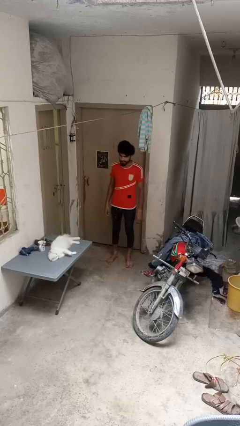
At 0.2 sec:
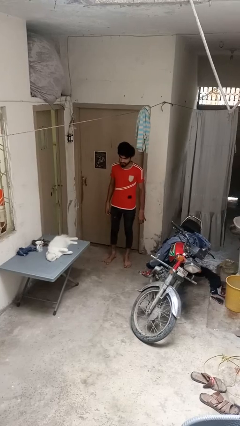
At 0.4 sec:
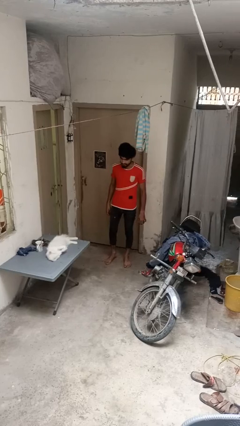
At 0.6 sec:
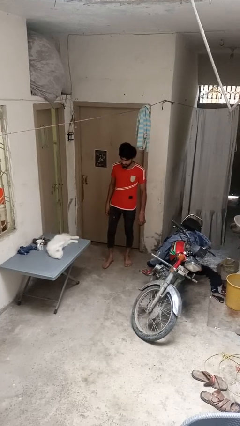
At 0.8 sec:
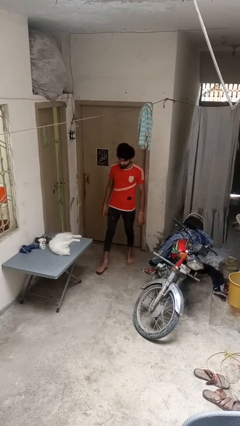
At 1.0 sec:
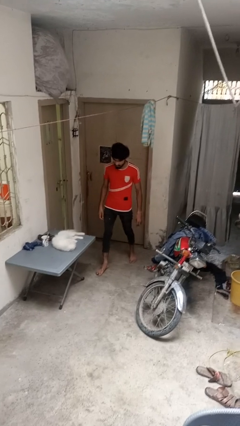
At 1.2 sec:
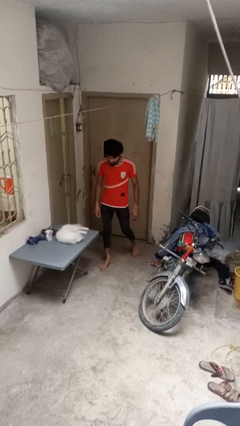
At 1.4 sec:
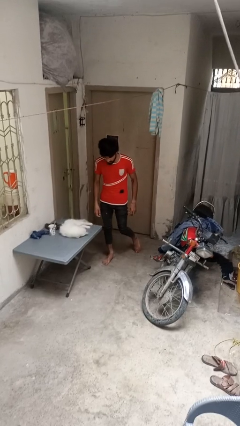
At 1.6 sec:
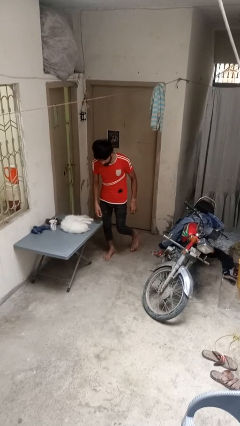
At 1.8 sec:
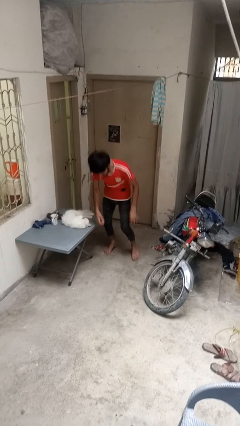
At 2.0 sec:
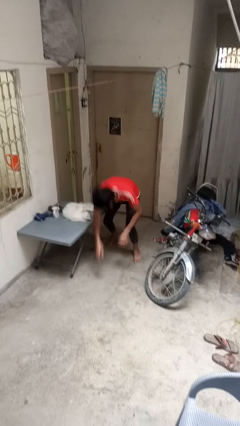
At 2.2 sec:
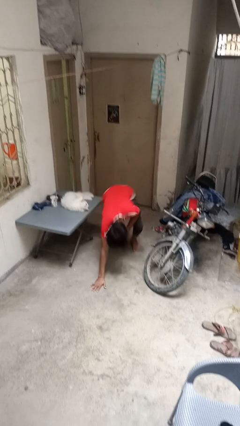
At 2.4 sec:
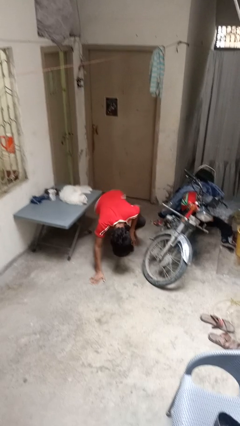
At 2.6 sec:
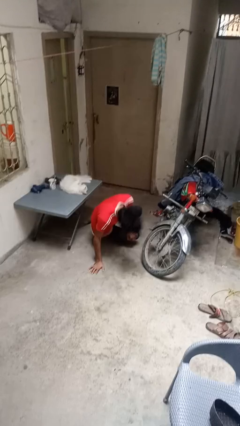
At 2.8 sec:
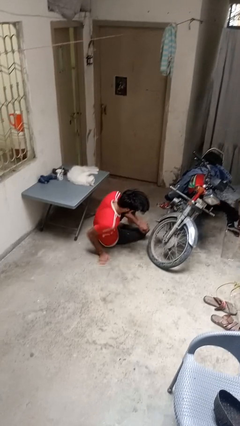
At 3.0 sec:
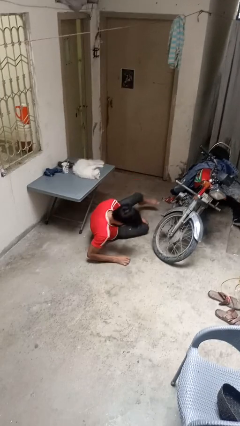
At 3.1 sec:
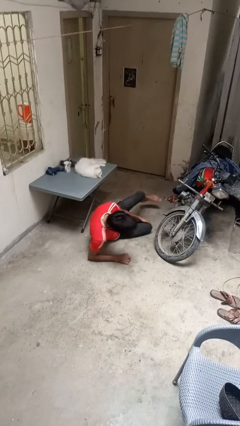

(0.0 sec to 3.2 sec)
person trips on object on floor

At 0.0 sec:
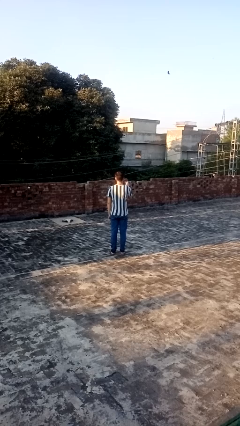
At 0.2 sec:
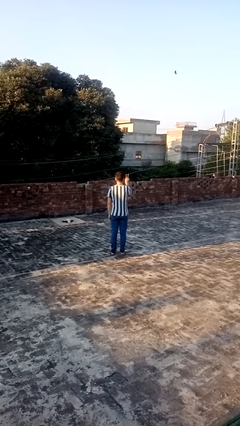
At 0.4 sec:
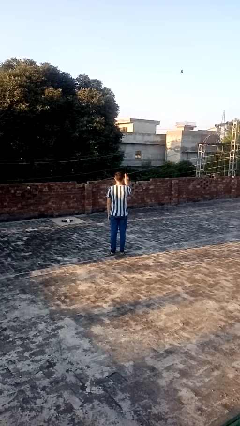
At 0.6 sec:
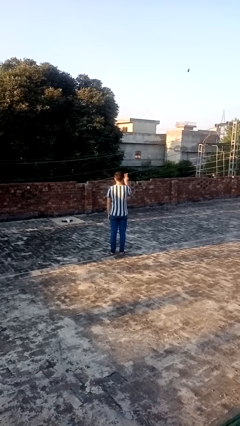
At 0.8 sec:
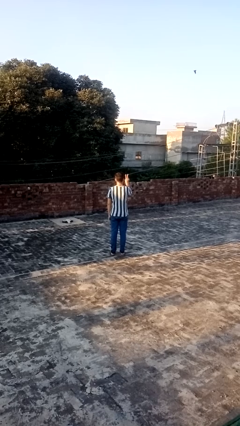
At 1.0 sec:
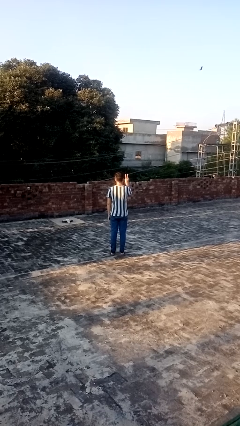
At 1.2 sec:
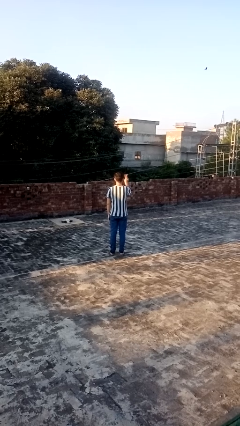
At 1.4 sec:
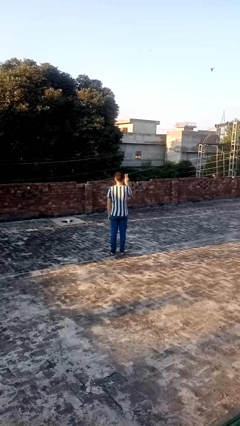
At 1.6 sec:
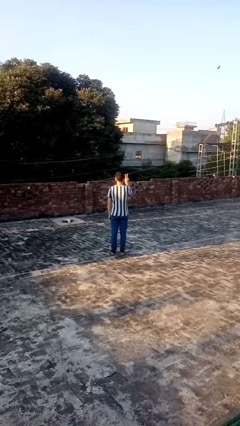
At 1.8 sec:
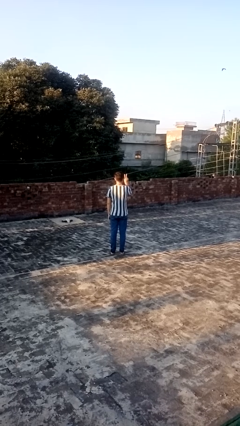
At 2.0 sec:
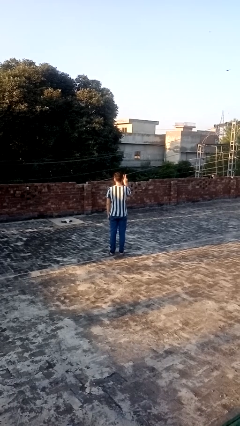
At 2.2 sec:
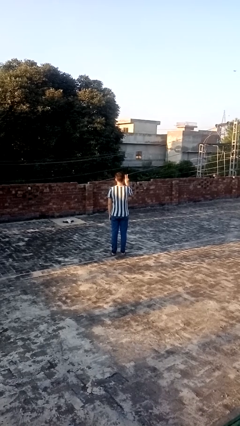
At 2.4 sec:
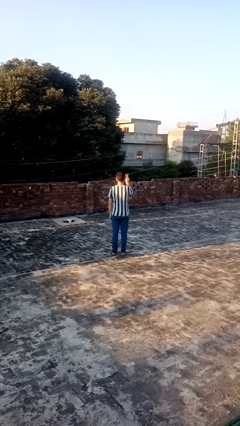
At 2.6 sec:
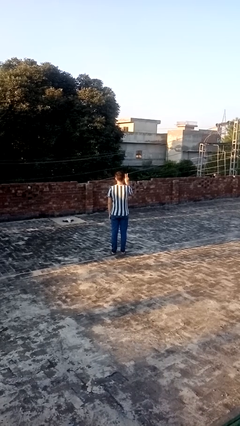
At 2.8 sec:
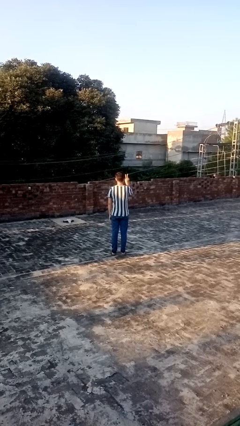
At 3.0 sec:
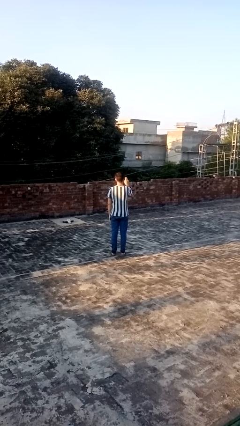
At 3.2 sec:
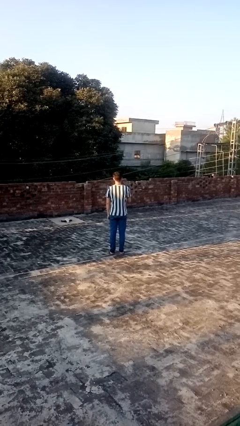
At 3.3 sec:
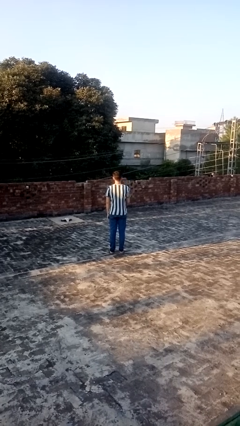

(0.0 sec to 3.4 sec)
person gestures peace

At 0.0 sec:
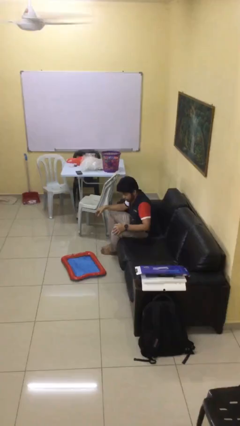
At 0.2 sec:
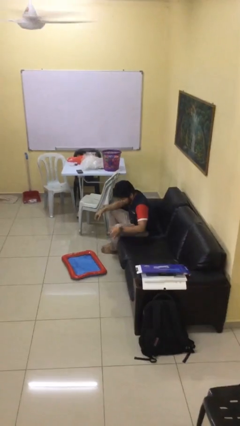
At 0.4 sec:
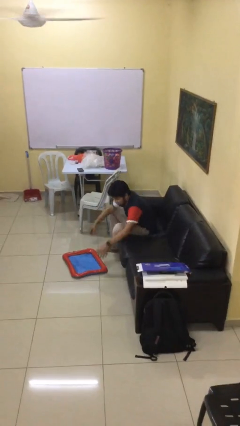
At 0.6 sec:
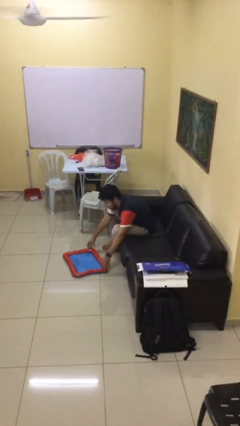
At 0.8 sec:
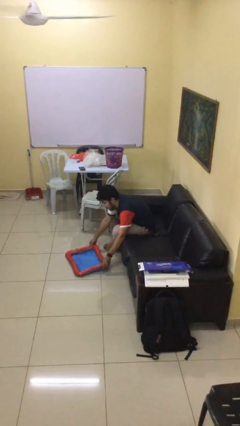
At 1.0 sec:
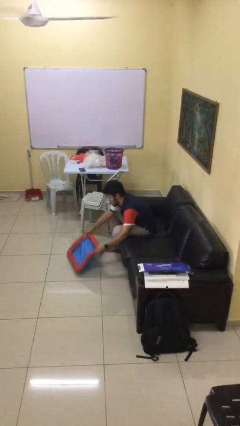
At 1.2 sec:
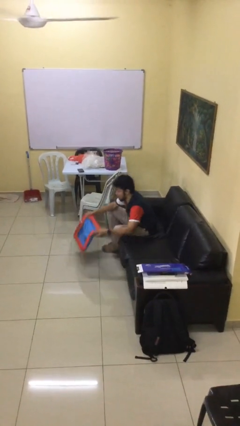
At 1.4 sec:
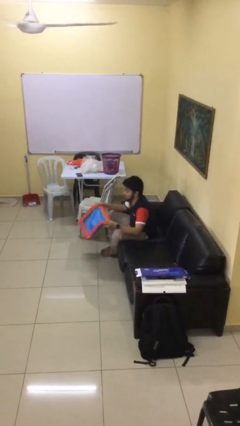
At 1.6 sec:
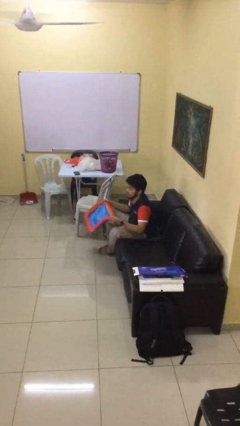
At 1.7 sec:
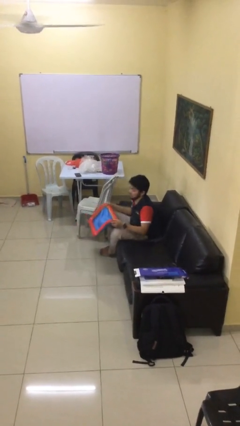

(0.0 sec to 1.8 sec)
person picks up object from floor

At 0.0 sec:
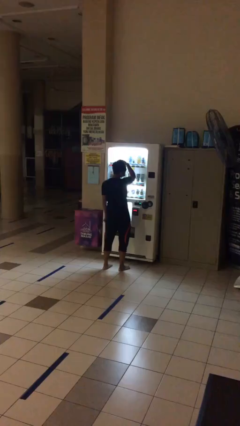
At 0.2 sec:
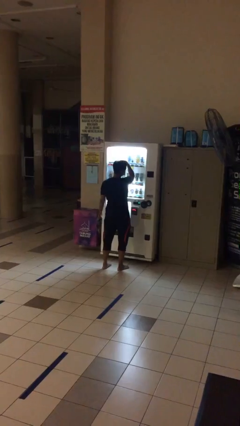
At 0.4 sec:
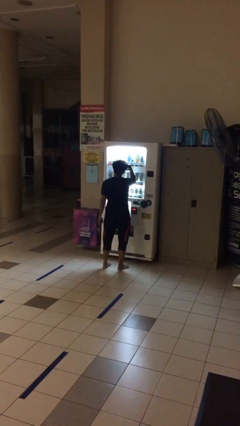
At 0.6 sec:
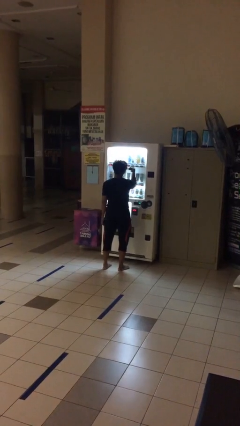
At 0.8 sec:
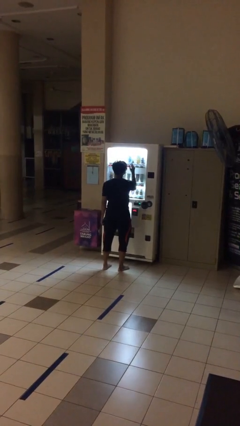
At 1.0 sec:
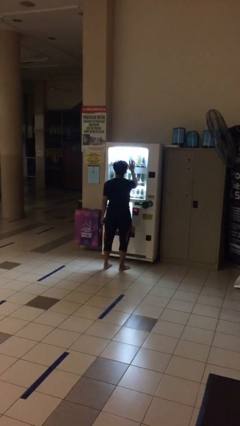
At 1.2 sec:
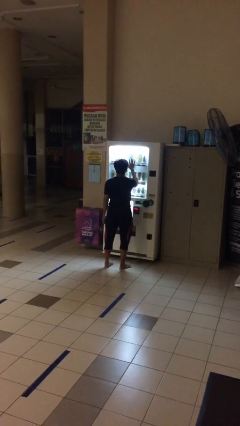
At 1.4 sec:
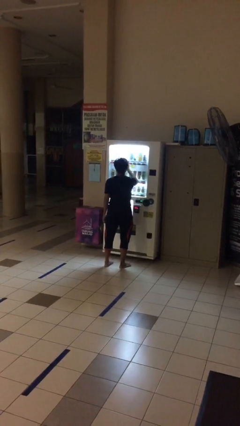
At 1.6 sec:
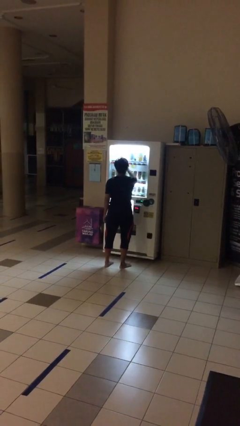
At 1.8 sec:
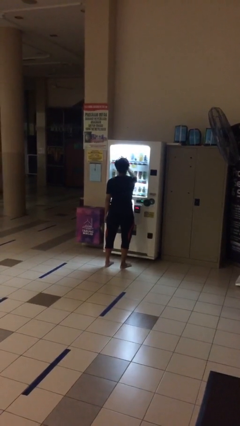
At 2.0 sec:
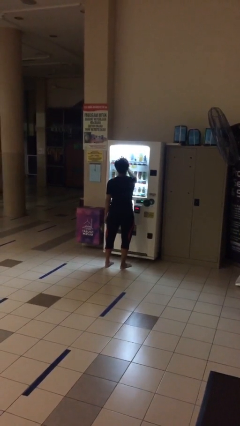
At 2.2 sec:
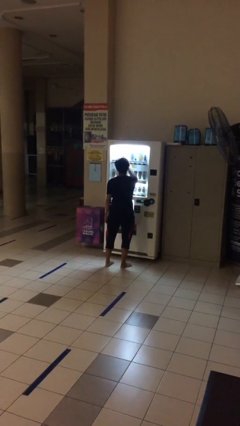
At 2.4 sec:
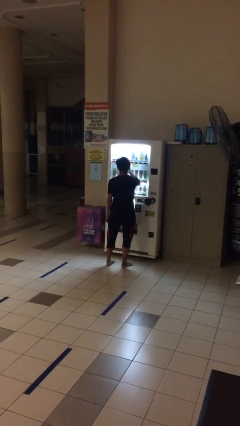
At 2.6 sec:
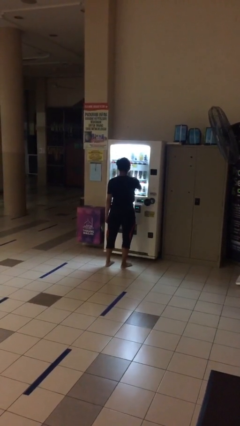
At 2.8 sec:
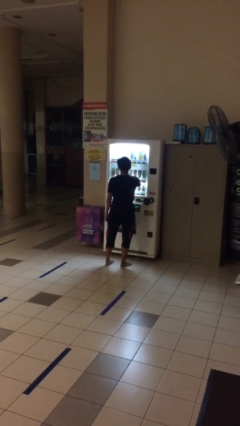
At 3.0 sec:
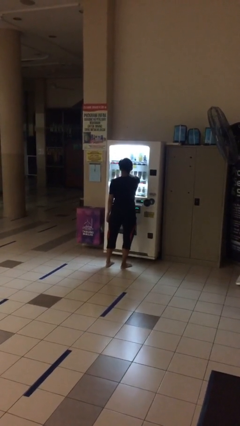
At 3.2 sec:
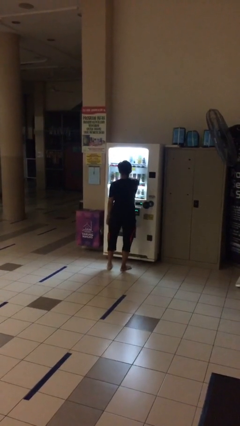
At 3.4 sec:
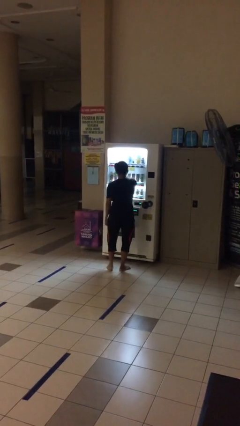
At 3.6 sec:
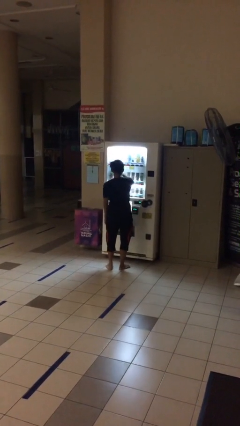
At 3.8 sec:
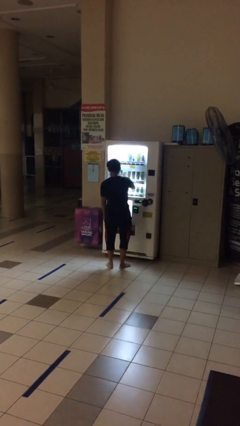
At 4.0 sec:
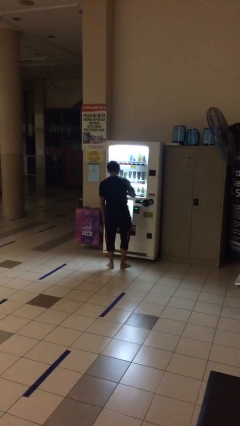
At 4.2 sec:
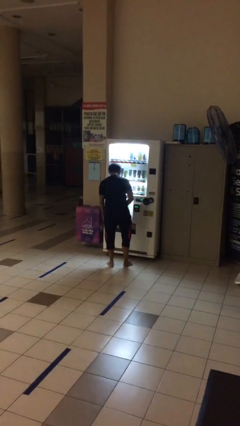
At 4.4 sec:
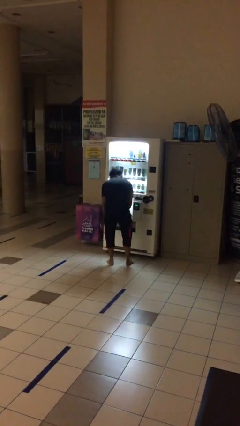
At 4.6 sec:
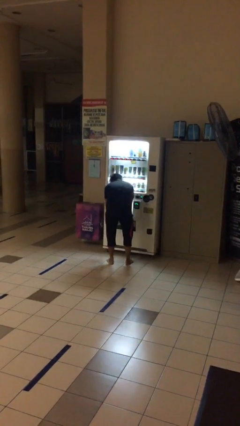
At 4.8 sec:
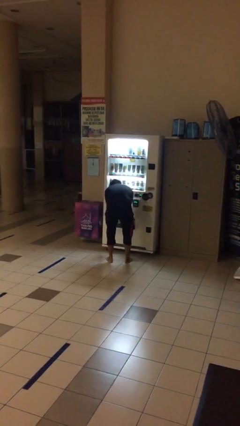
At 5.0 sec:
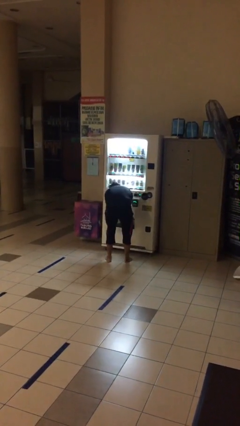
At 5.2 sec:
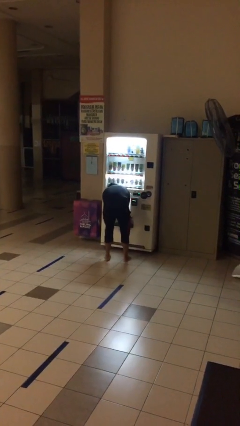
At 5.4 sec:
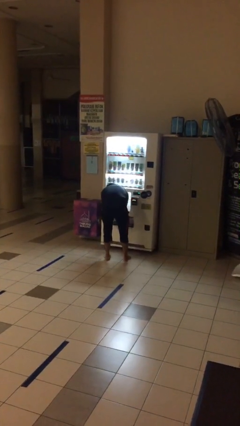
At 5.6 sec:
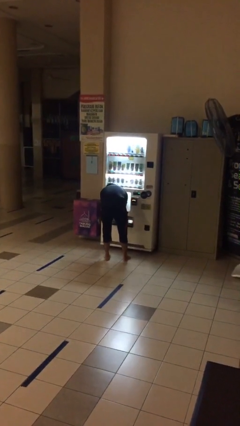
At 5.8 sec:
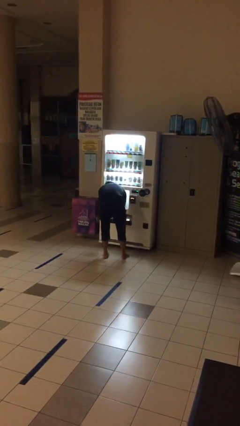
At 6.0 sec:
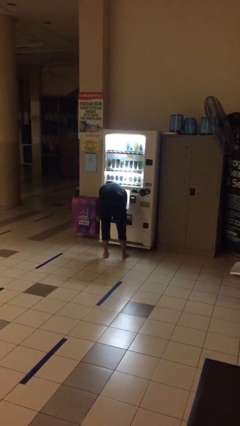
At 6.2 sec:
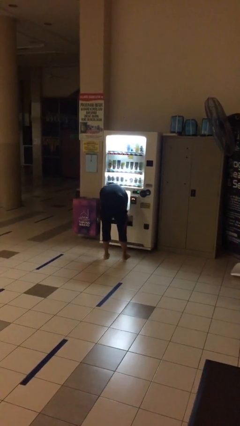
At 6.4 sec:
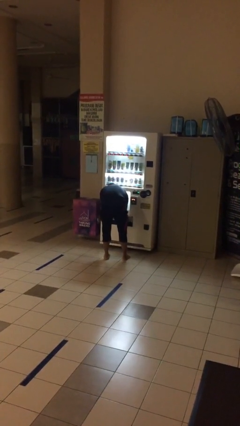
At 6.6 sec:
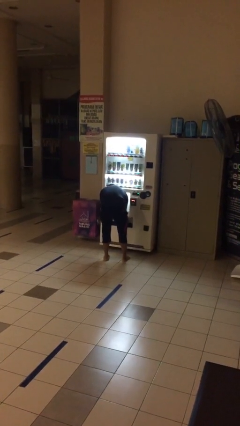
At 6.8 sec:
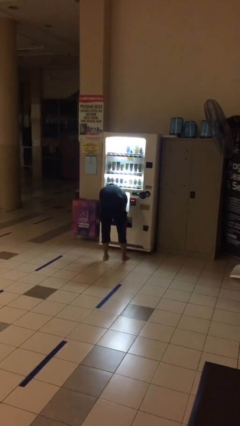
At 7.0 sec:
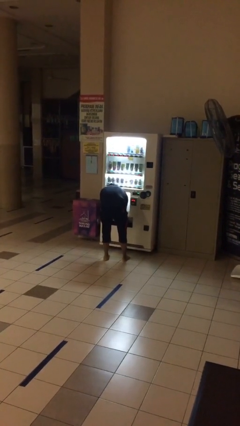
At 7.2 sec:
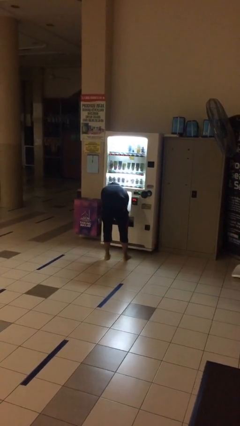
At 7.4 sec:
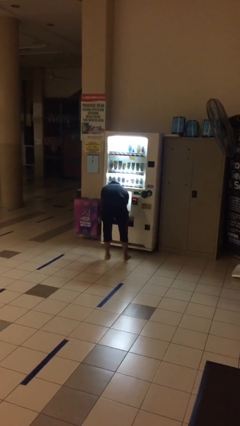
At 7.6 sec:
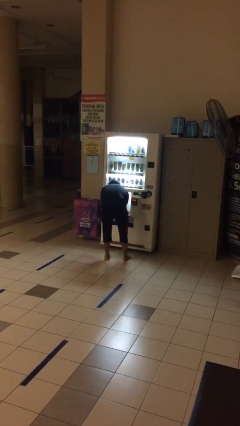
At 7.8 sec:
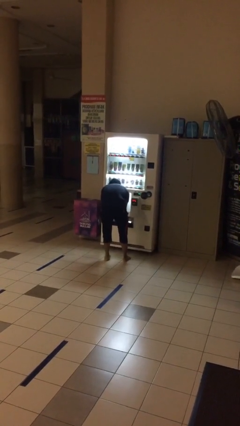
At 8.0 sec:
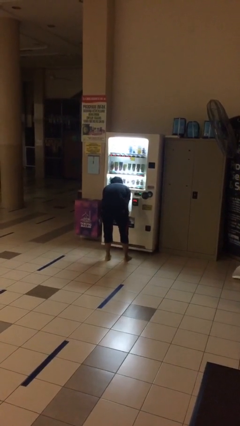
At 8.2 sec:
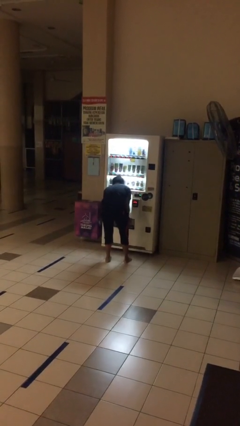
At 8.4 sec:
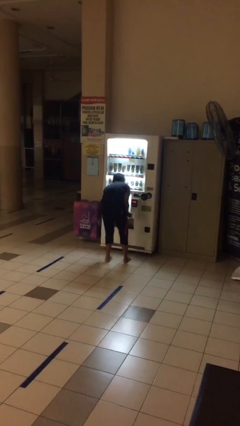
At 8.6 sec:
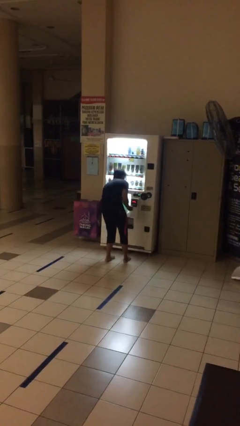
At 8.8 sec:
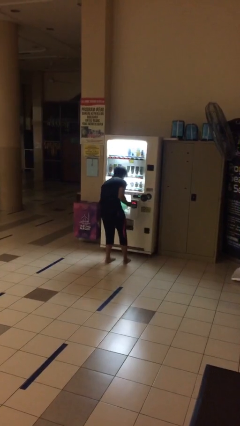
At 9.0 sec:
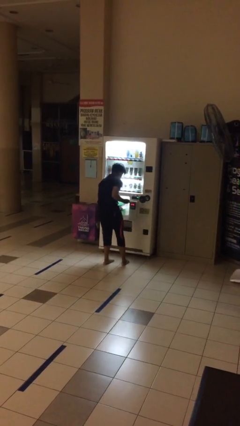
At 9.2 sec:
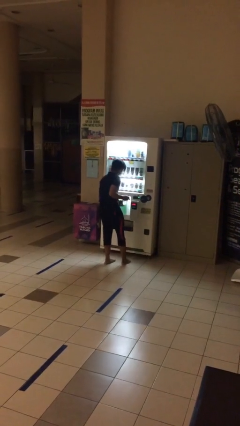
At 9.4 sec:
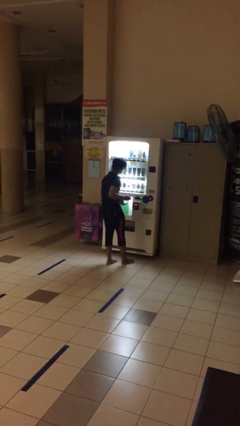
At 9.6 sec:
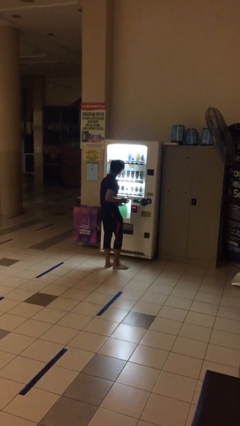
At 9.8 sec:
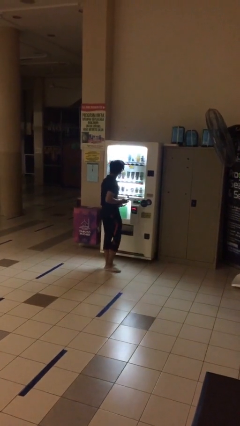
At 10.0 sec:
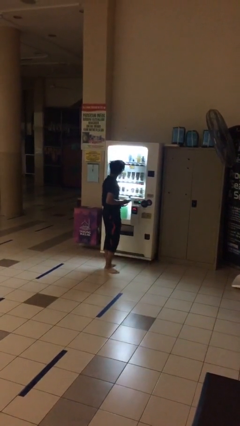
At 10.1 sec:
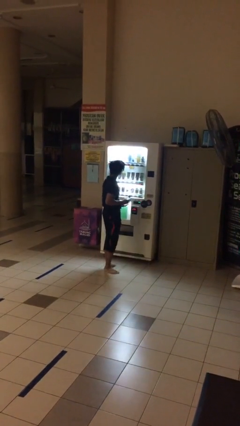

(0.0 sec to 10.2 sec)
person purchases from machine
